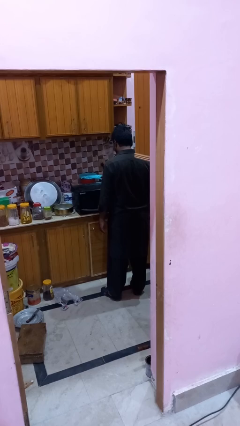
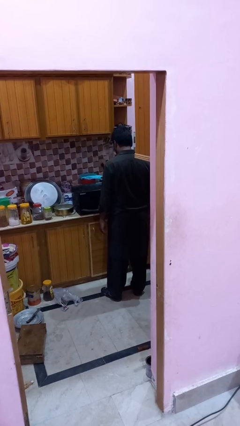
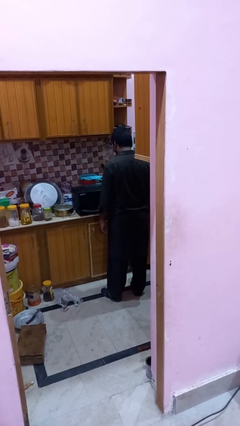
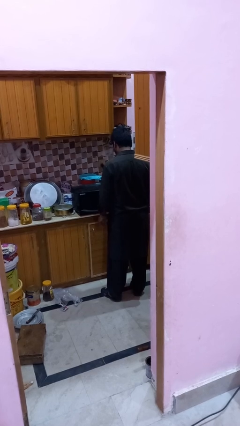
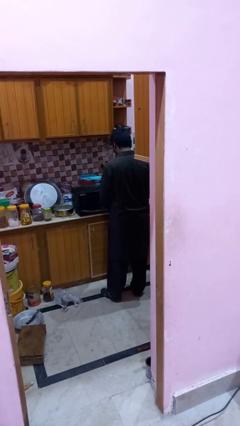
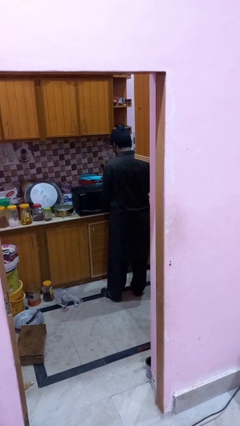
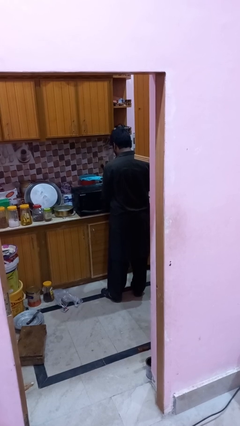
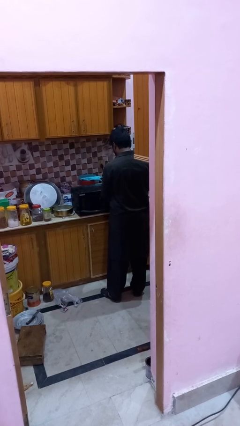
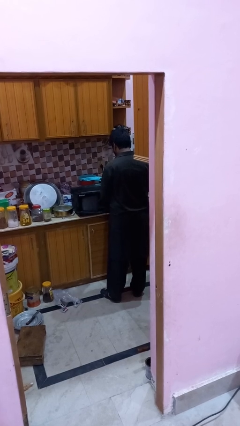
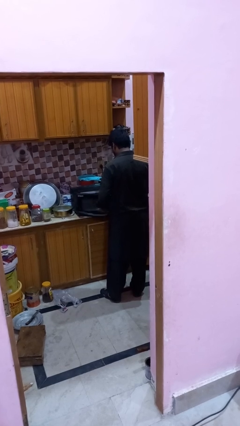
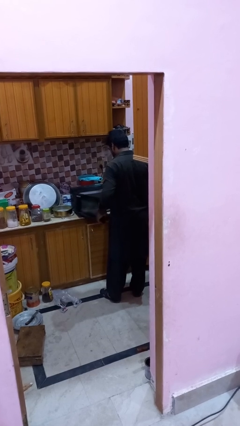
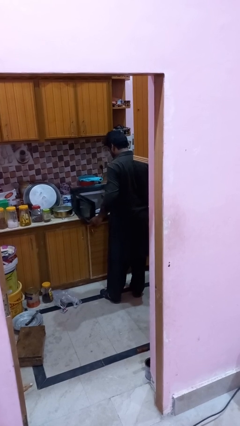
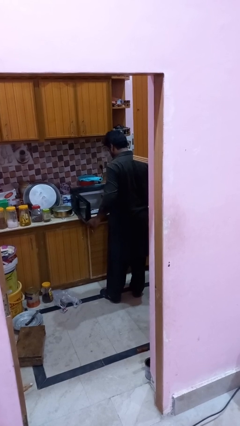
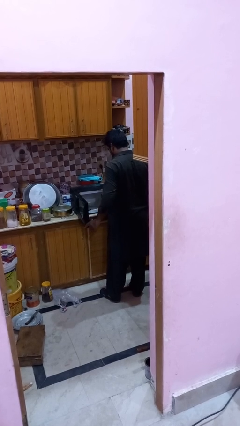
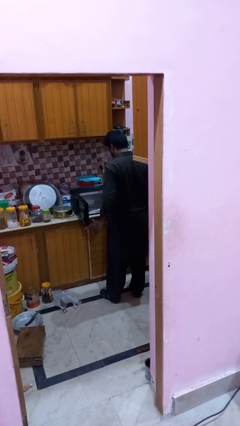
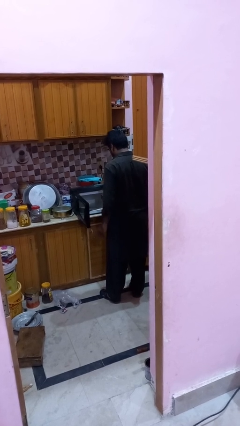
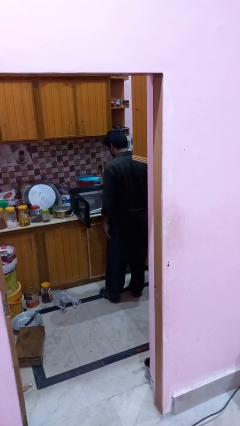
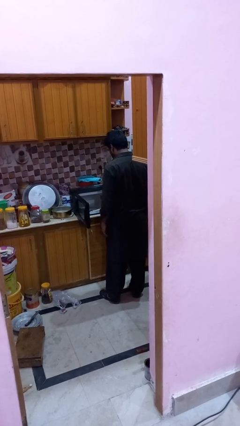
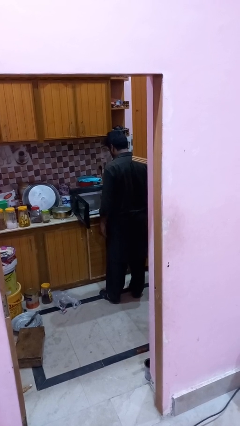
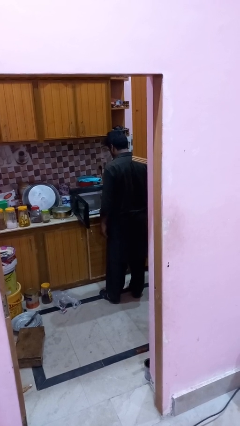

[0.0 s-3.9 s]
person opens oven door

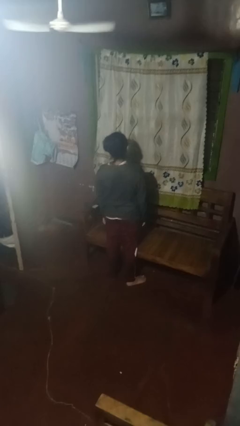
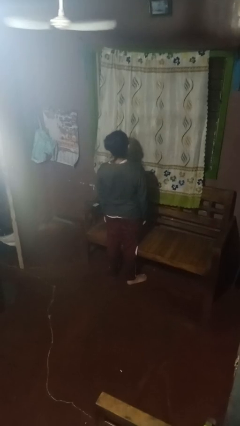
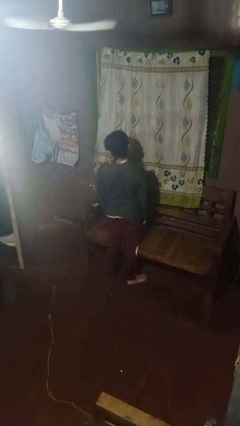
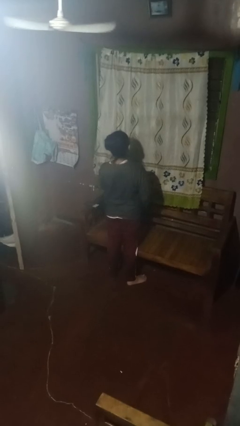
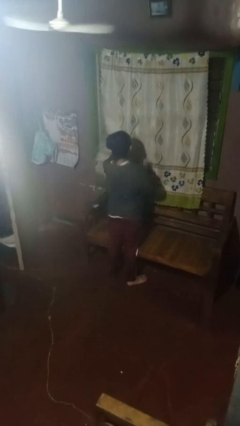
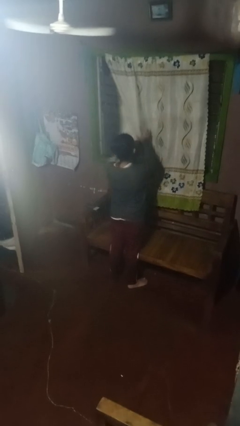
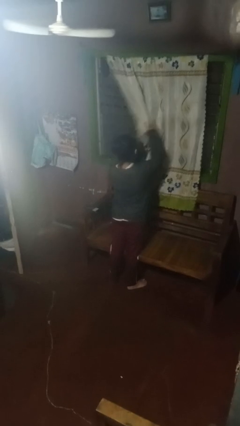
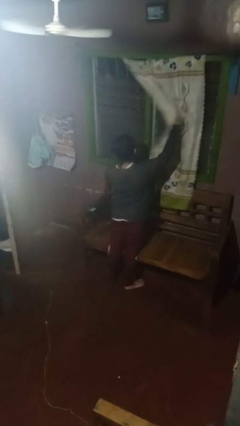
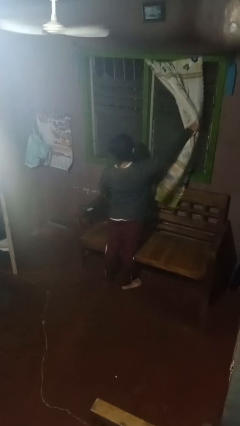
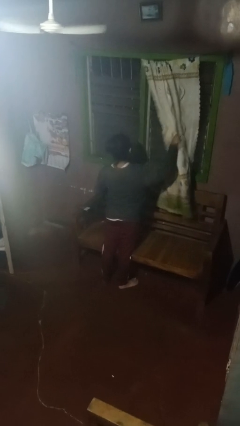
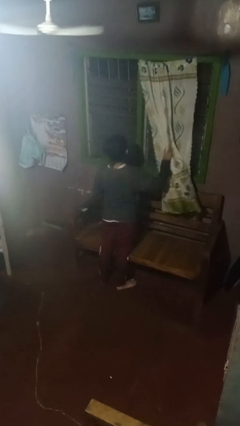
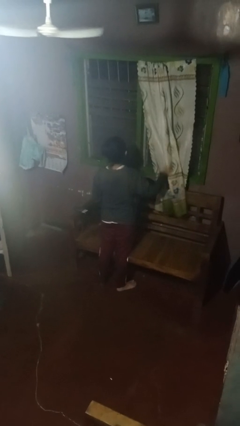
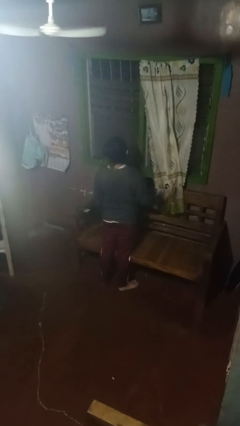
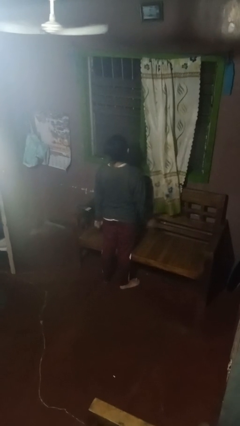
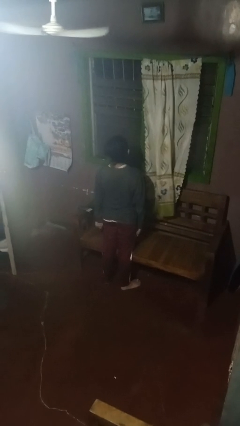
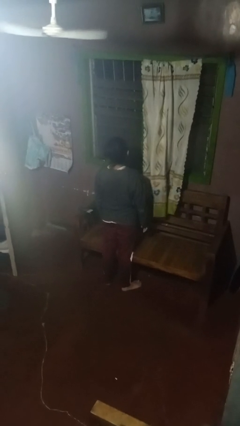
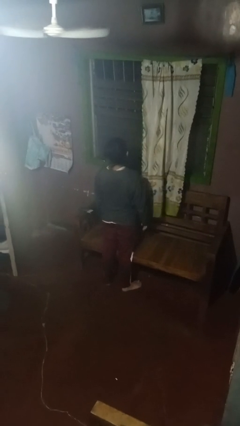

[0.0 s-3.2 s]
person opens curtains

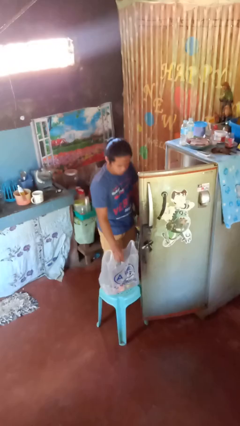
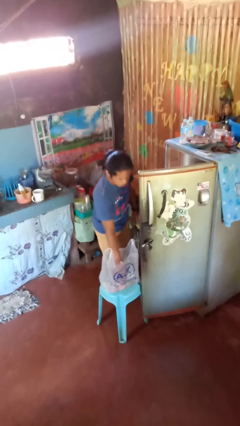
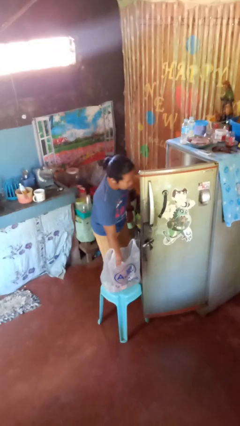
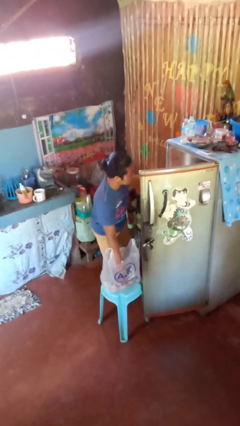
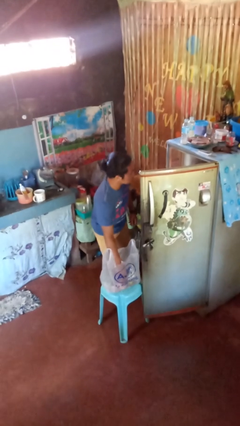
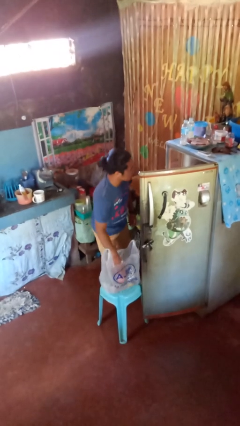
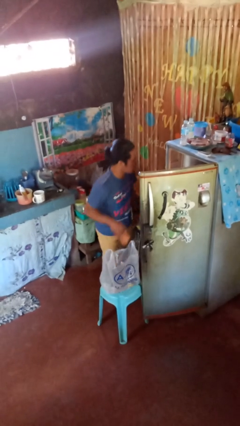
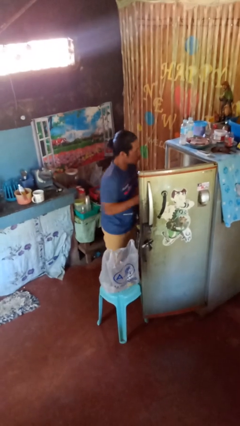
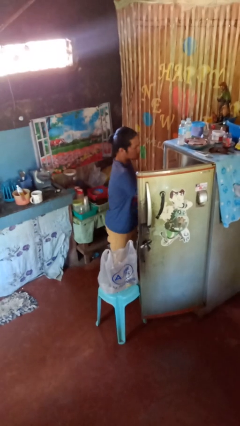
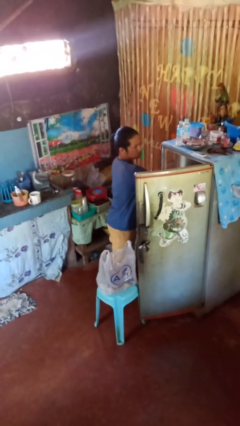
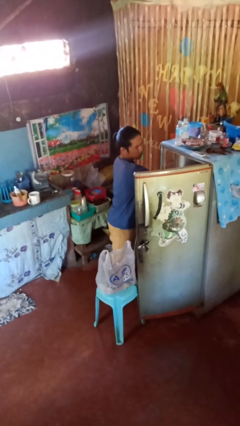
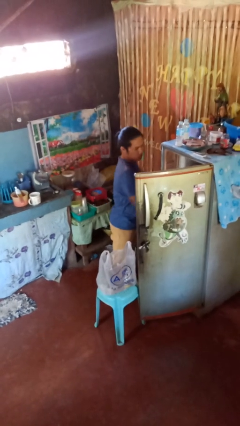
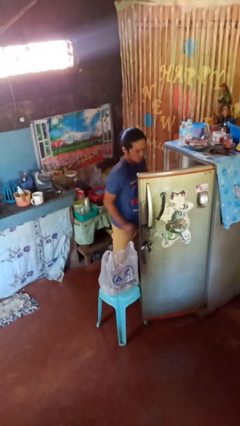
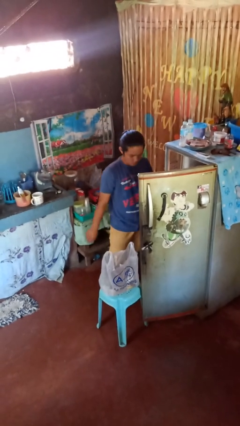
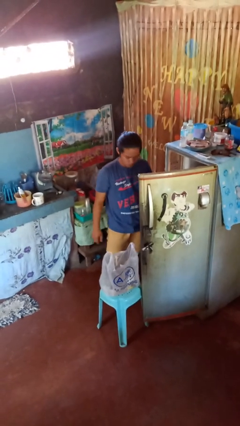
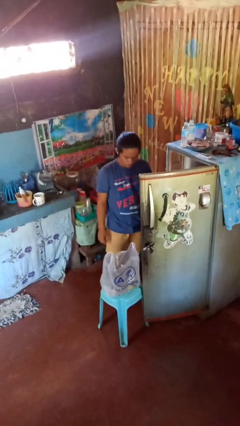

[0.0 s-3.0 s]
person loads groceries into refrigerator

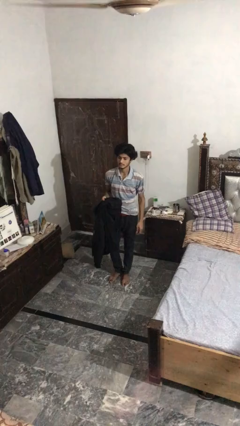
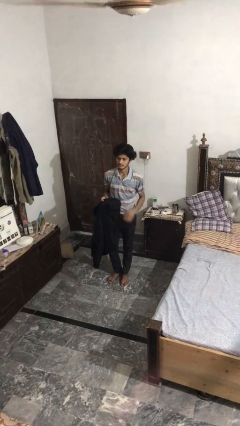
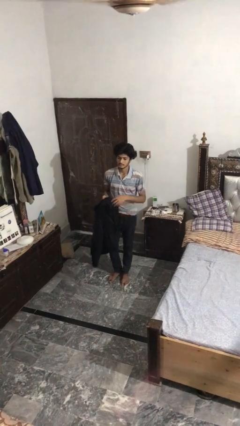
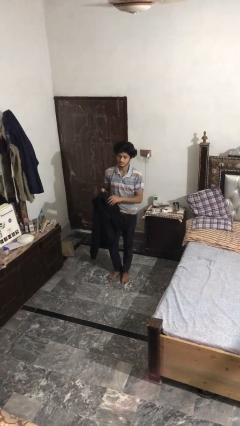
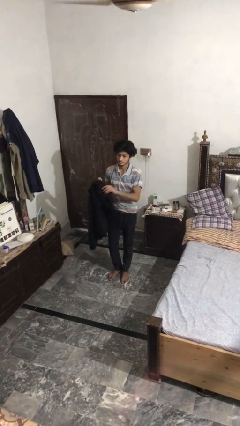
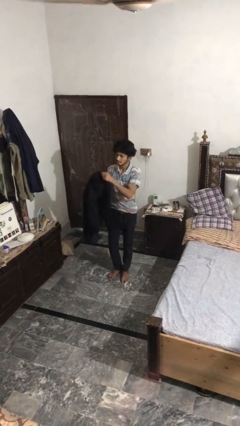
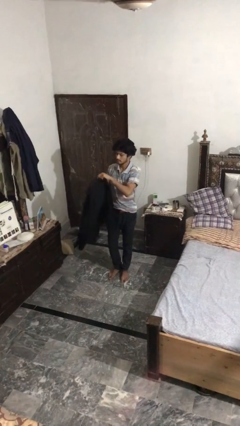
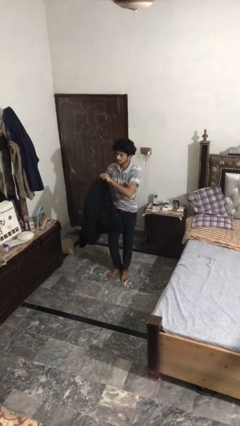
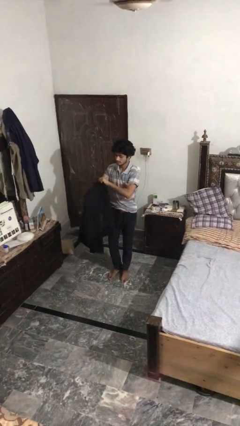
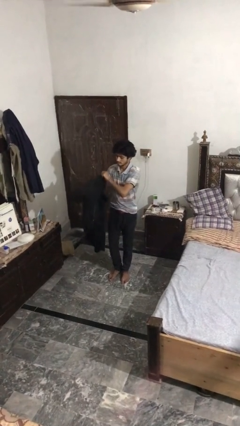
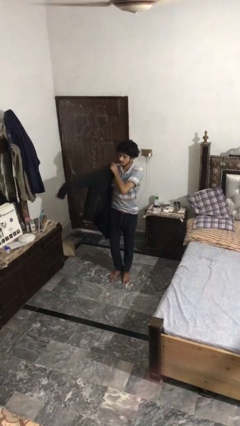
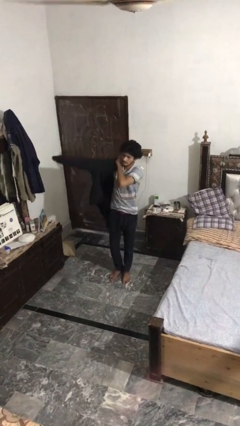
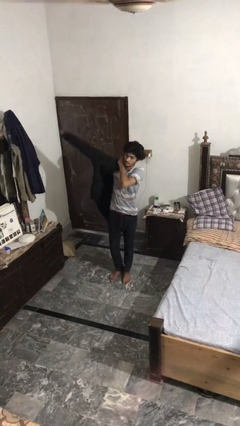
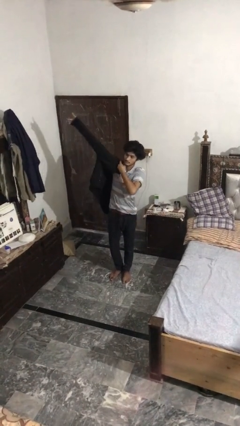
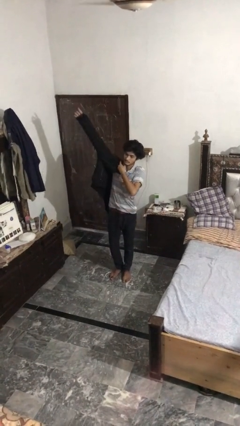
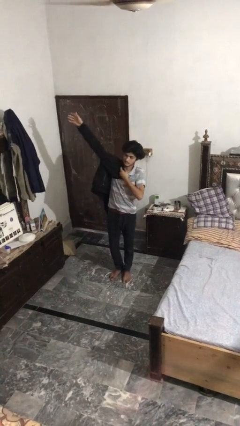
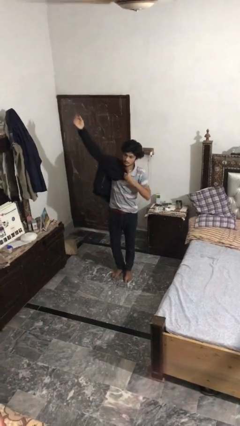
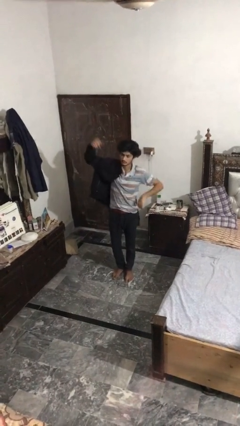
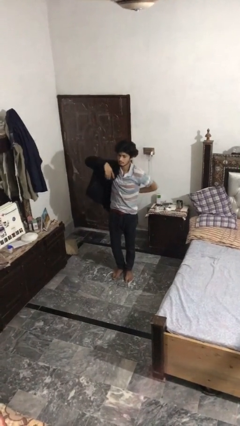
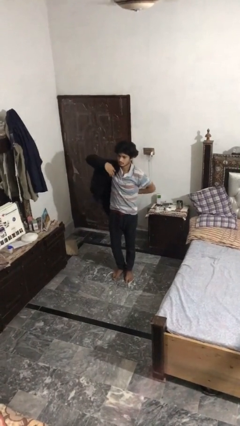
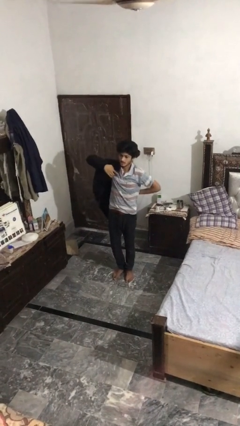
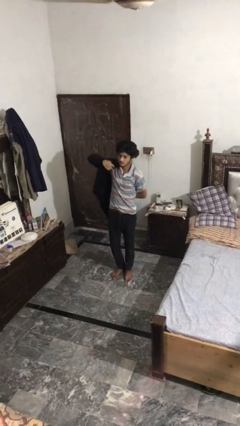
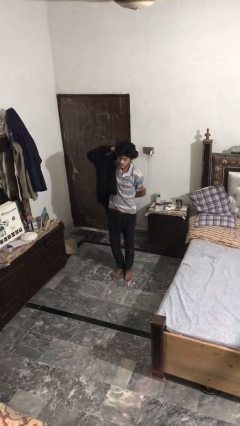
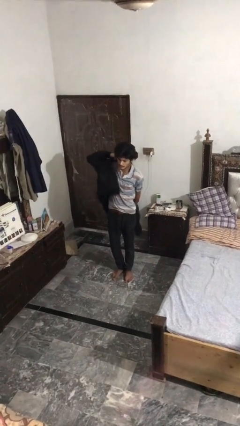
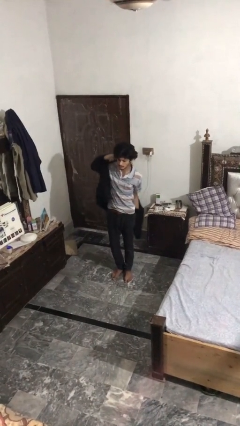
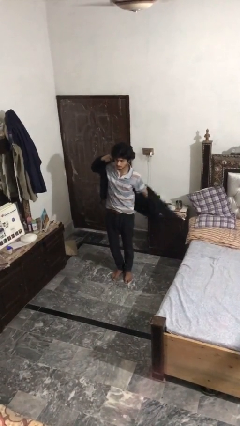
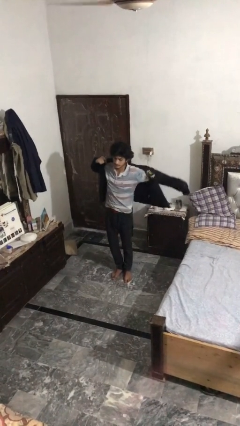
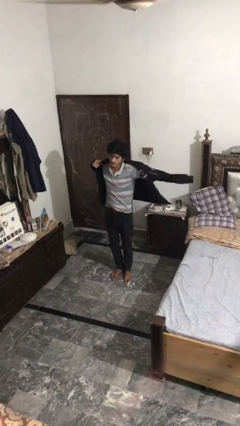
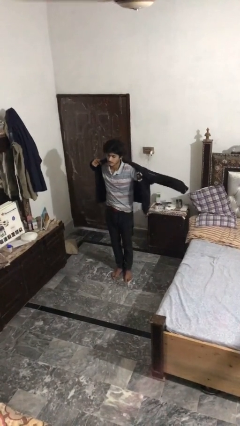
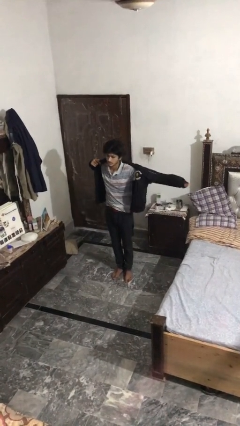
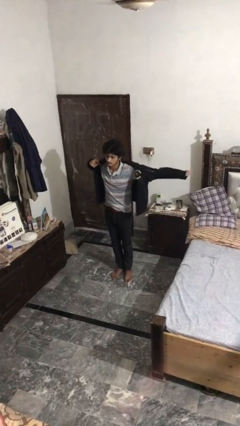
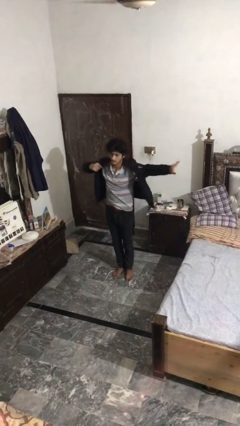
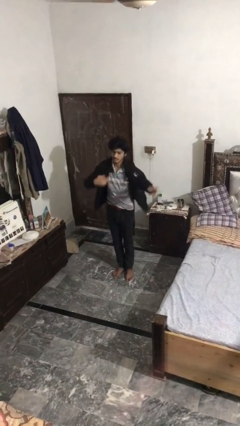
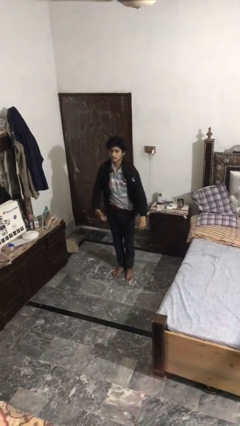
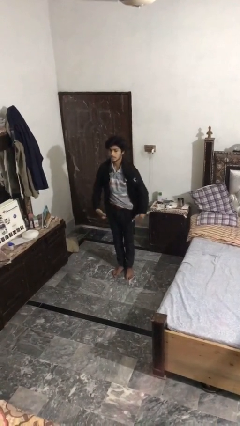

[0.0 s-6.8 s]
person puts on jacket

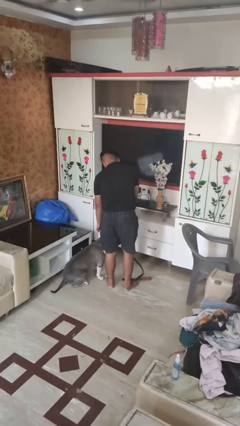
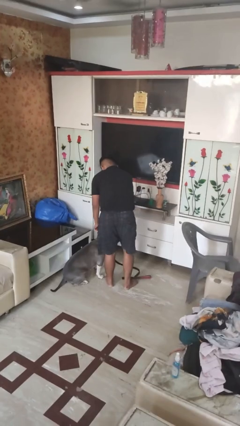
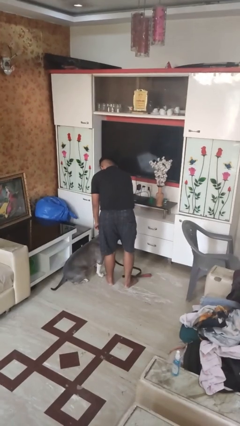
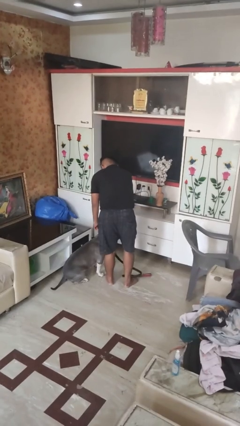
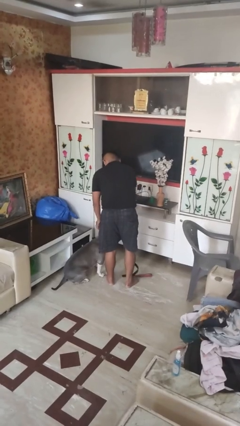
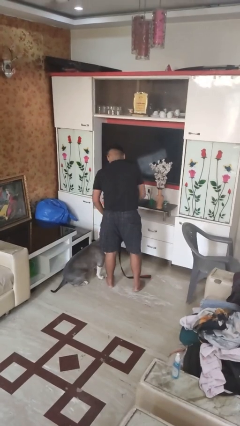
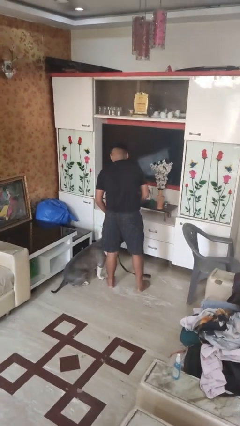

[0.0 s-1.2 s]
person attaches leash to dog
